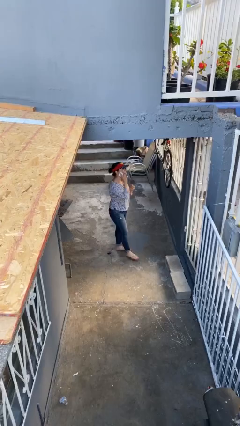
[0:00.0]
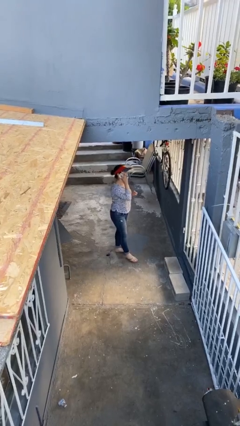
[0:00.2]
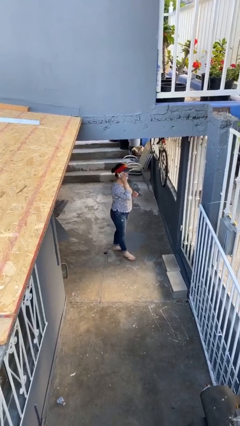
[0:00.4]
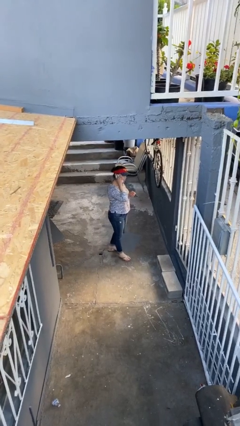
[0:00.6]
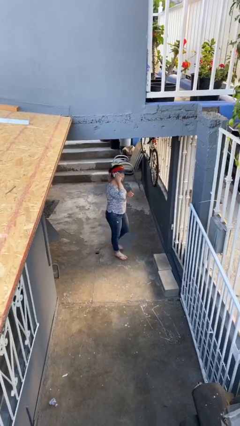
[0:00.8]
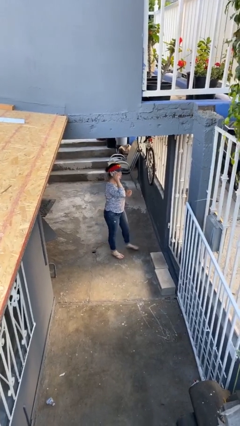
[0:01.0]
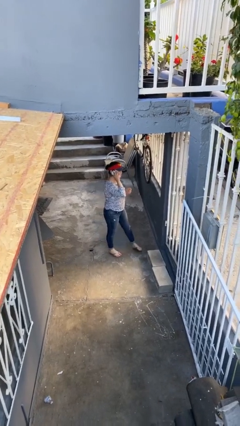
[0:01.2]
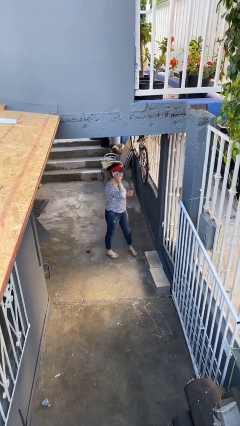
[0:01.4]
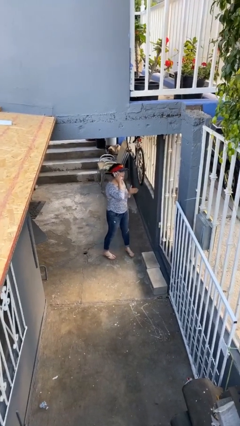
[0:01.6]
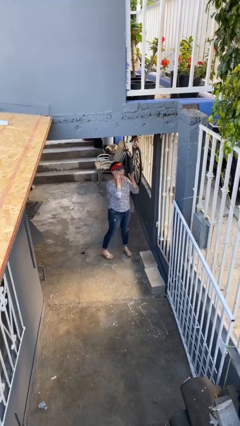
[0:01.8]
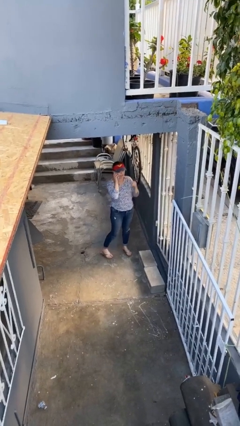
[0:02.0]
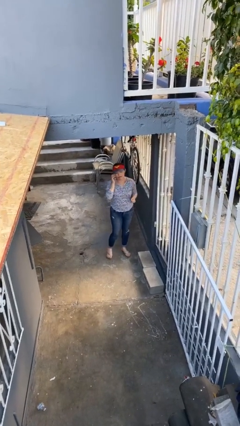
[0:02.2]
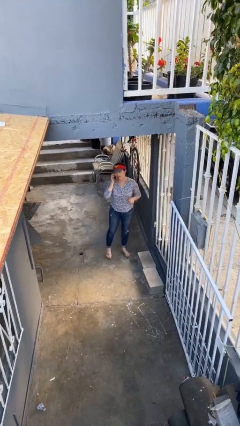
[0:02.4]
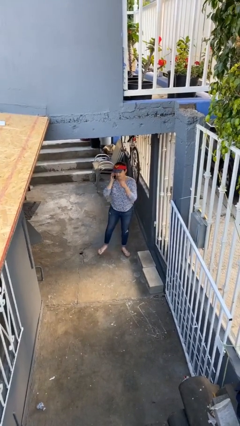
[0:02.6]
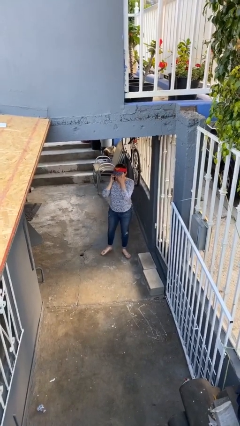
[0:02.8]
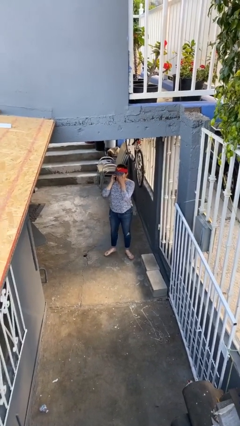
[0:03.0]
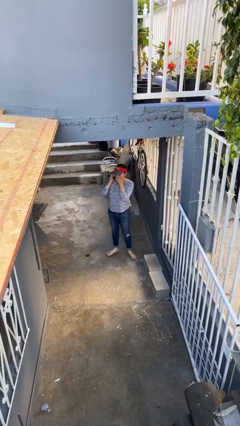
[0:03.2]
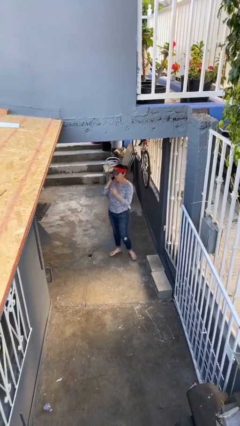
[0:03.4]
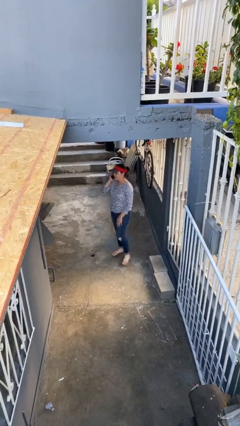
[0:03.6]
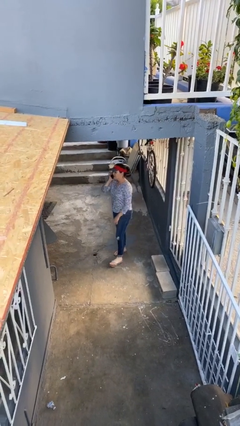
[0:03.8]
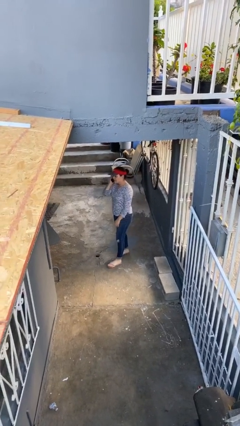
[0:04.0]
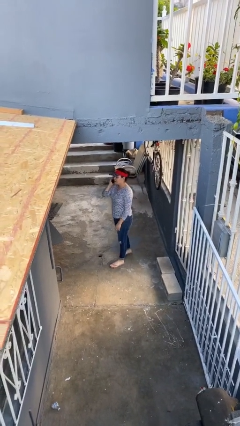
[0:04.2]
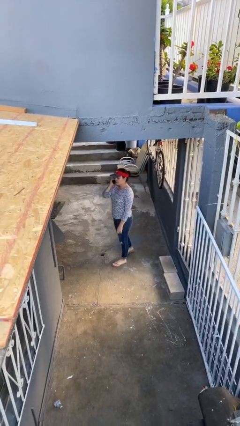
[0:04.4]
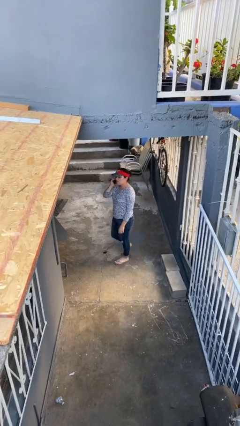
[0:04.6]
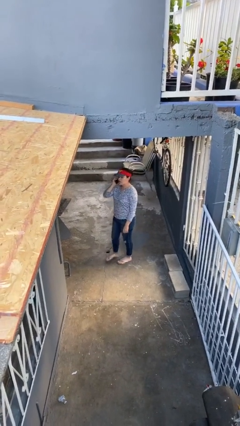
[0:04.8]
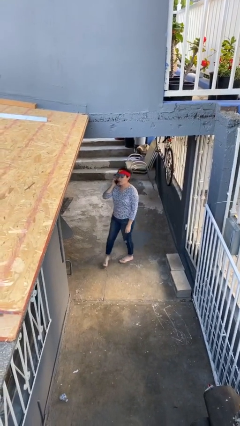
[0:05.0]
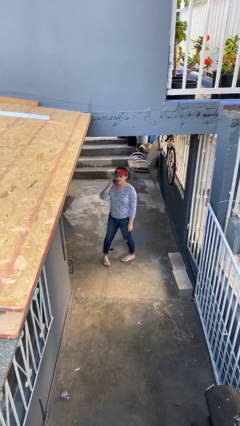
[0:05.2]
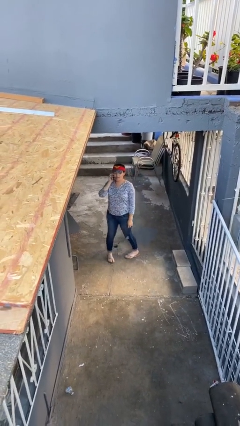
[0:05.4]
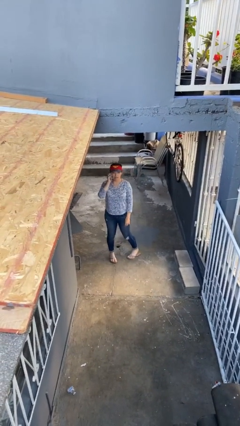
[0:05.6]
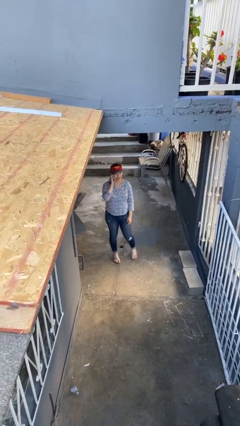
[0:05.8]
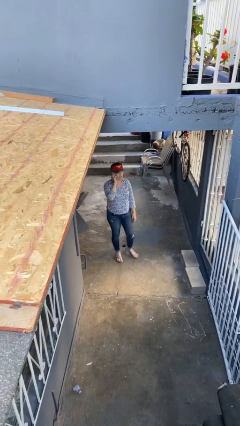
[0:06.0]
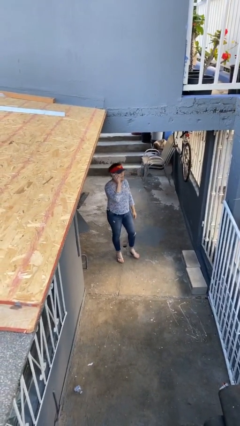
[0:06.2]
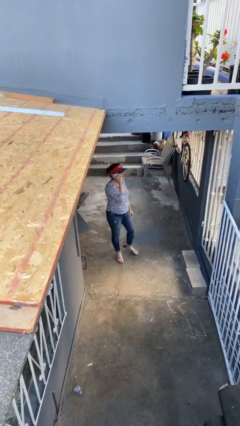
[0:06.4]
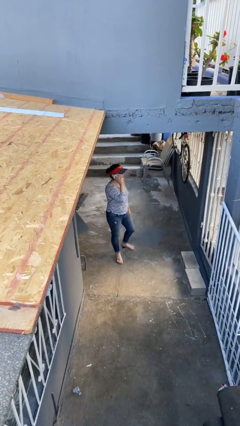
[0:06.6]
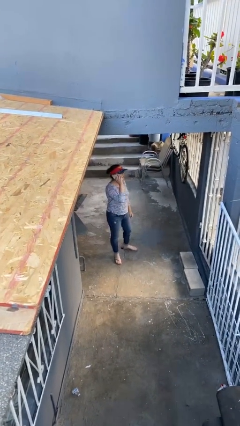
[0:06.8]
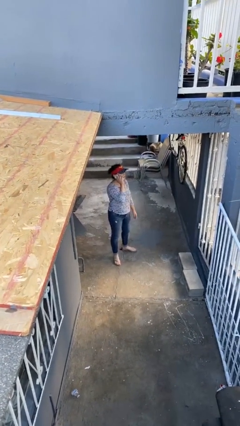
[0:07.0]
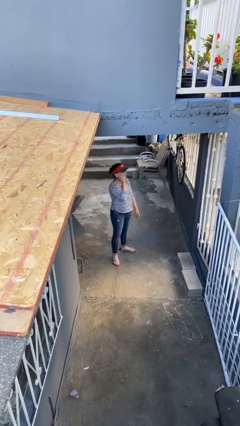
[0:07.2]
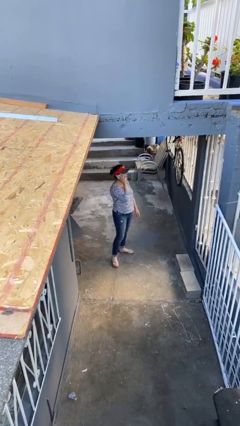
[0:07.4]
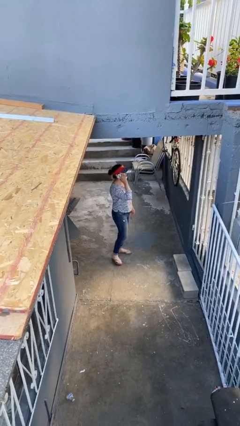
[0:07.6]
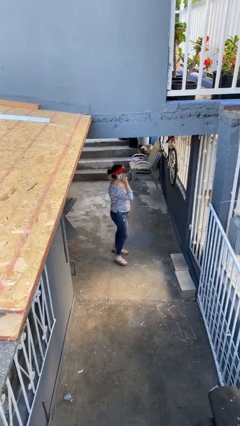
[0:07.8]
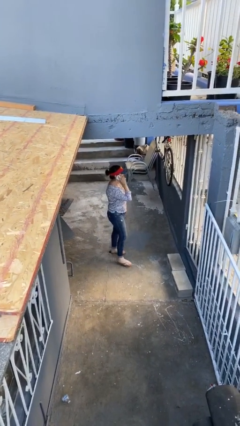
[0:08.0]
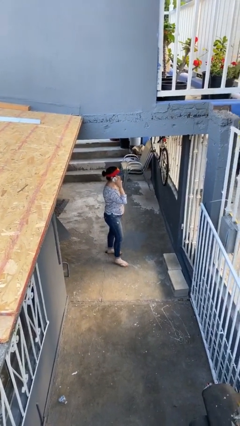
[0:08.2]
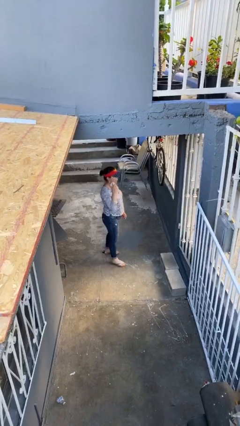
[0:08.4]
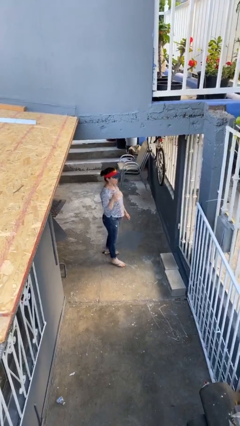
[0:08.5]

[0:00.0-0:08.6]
person talks on phone

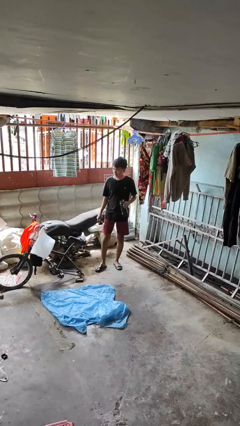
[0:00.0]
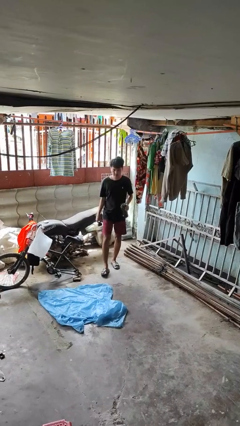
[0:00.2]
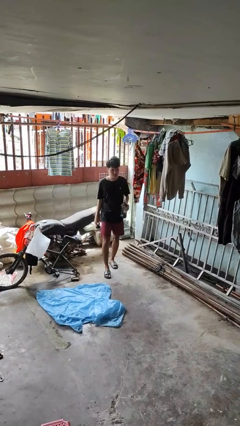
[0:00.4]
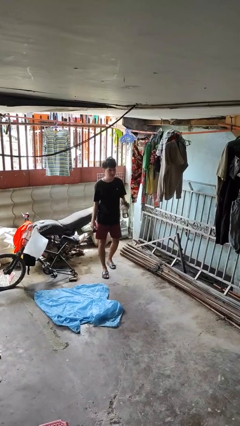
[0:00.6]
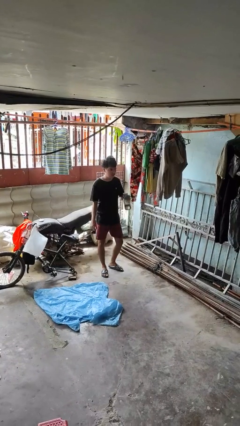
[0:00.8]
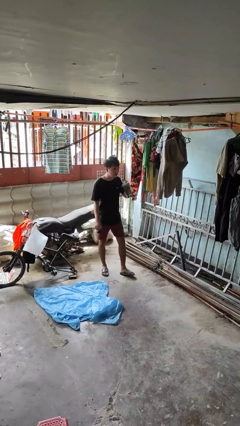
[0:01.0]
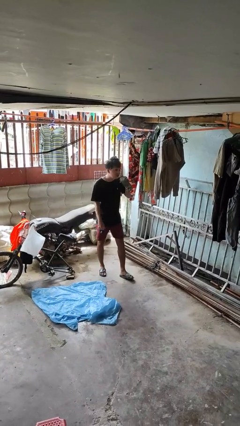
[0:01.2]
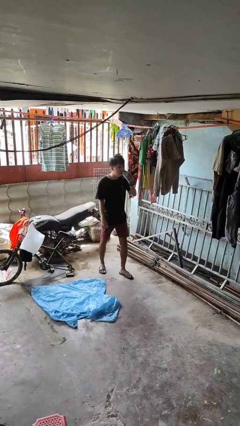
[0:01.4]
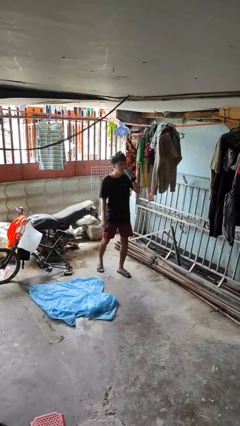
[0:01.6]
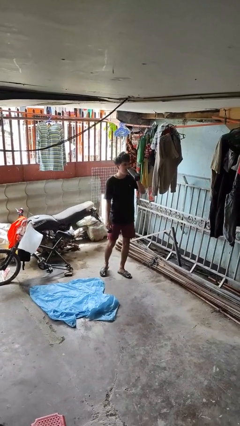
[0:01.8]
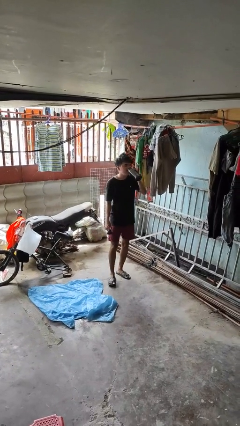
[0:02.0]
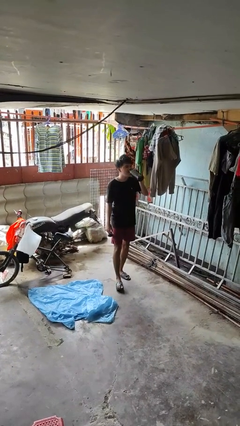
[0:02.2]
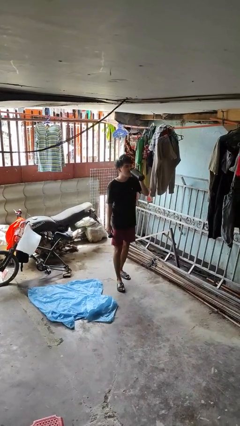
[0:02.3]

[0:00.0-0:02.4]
person drinks from bottle

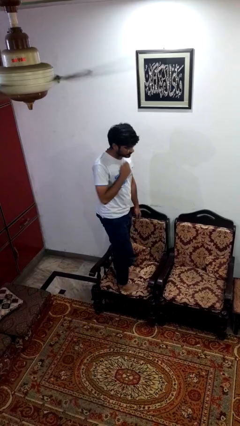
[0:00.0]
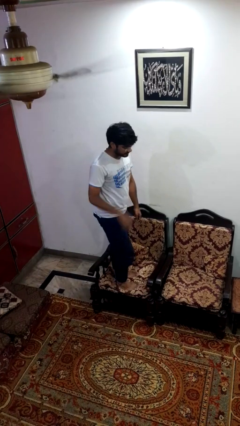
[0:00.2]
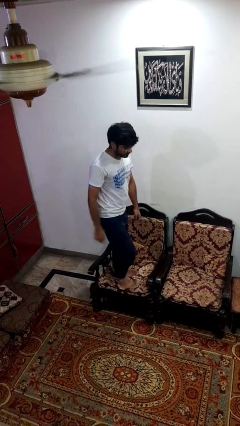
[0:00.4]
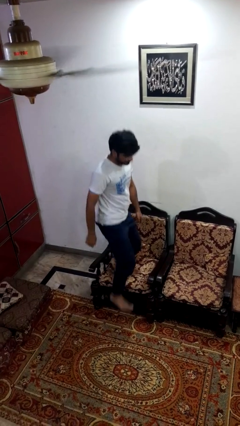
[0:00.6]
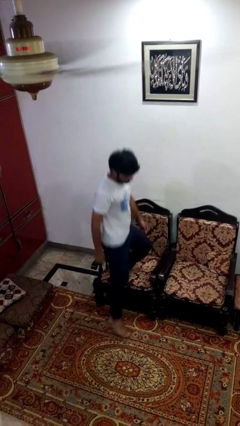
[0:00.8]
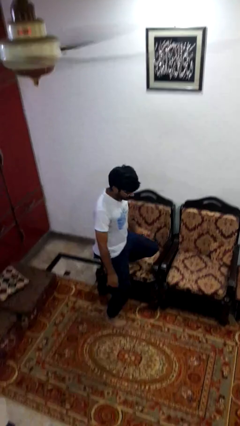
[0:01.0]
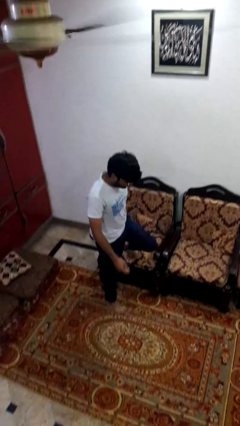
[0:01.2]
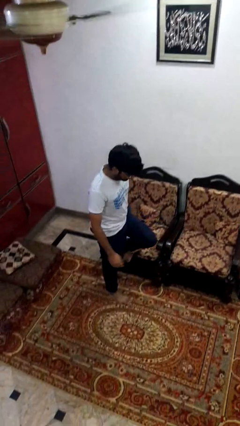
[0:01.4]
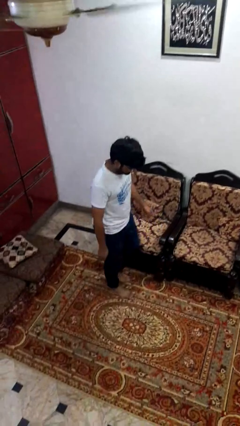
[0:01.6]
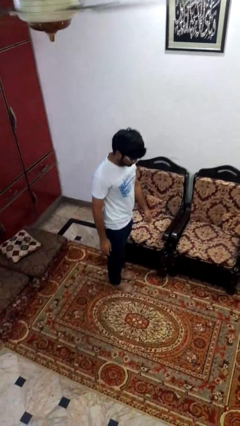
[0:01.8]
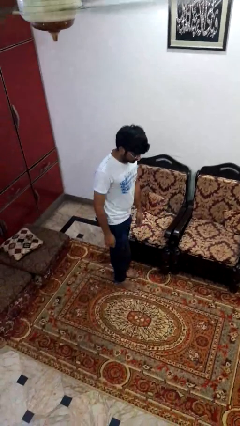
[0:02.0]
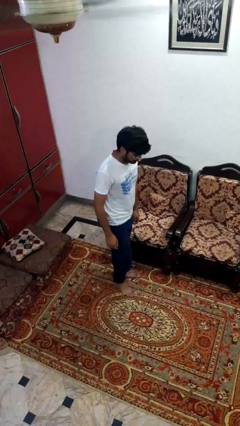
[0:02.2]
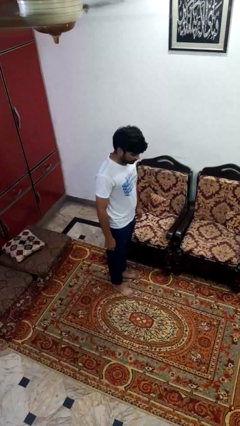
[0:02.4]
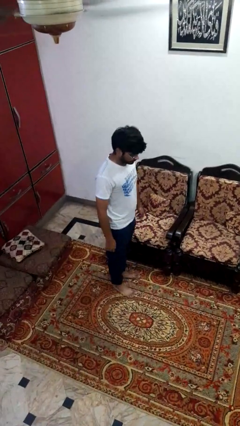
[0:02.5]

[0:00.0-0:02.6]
person climbs off couch

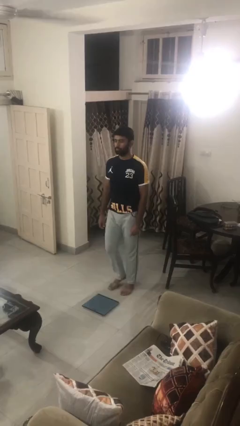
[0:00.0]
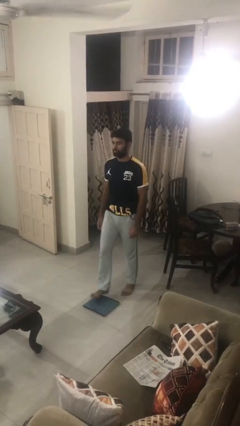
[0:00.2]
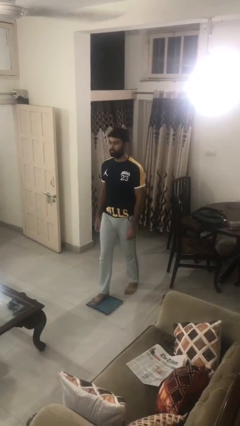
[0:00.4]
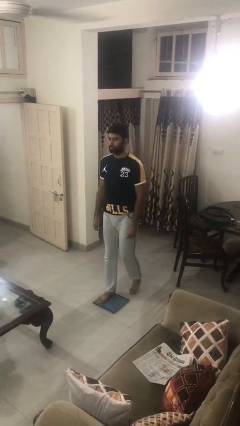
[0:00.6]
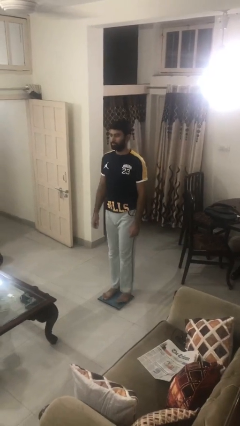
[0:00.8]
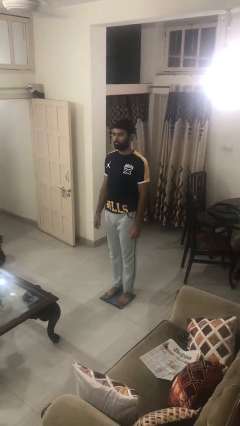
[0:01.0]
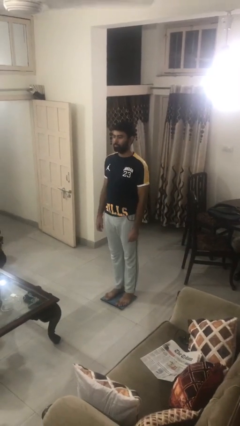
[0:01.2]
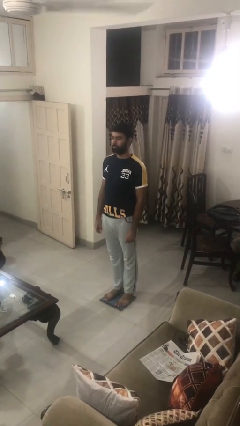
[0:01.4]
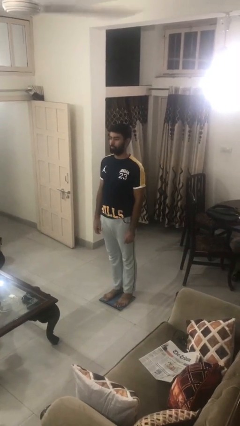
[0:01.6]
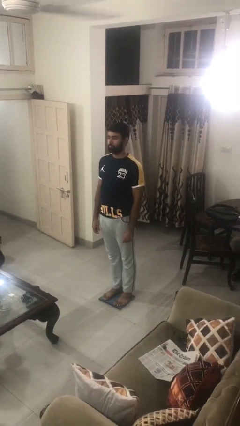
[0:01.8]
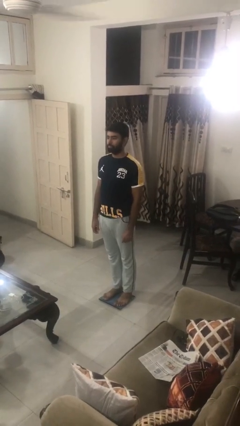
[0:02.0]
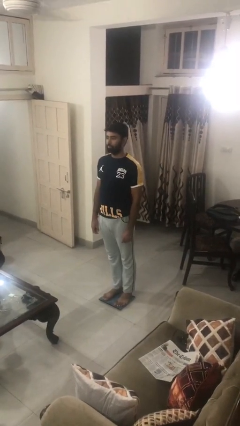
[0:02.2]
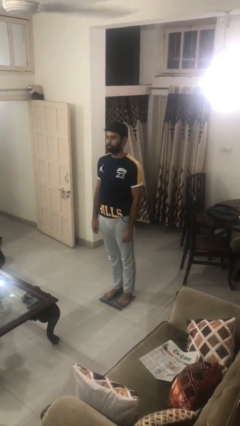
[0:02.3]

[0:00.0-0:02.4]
person uses bodyweight scale

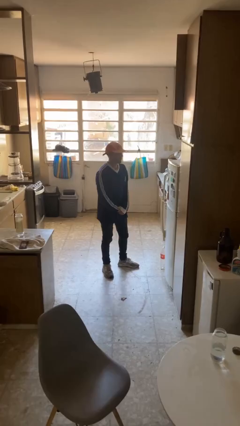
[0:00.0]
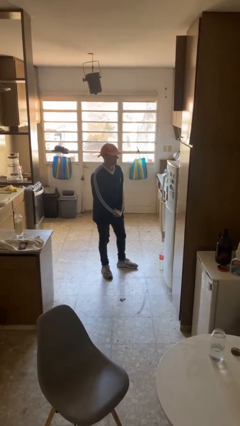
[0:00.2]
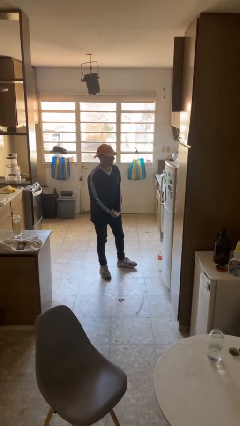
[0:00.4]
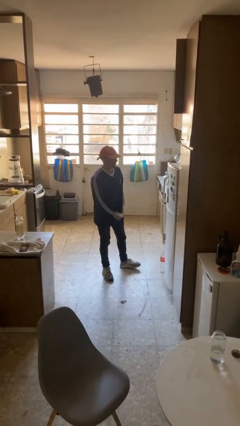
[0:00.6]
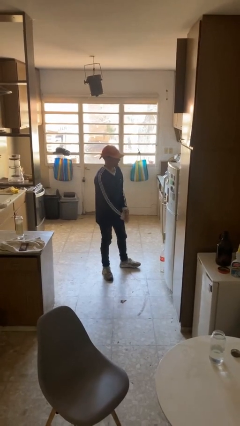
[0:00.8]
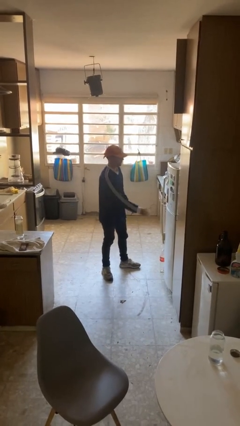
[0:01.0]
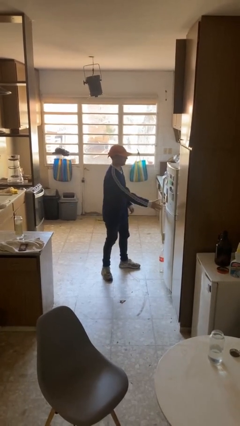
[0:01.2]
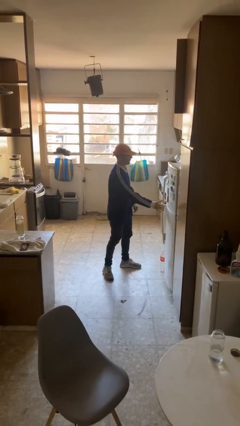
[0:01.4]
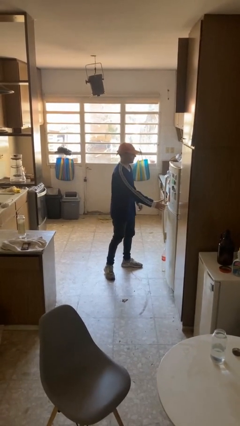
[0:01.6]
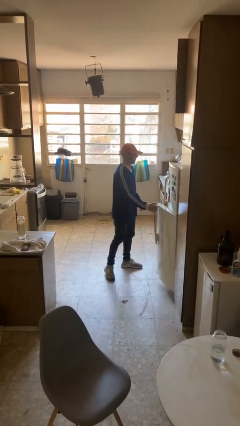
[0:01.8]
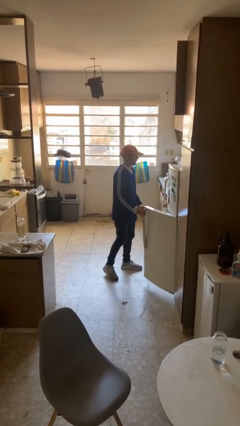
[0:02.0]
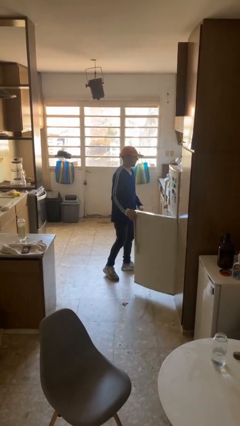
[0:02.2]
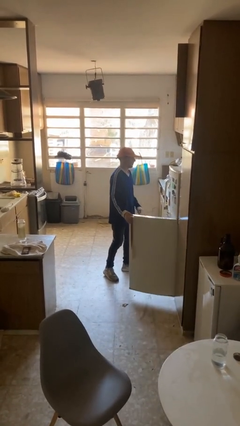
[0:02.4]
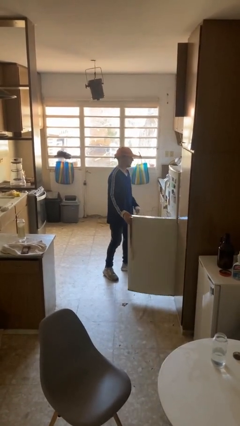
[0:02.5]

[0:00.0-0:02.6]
person opens refrigerator
